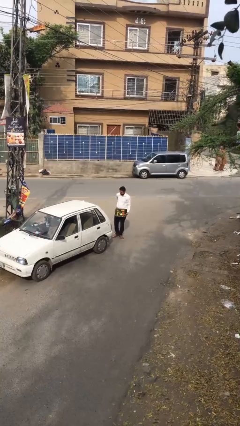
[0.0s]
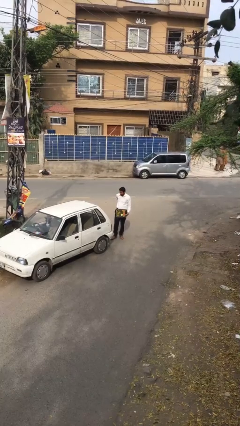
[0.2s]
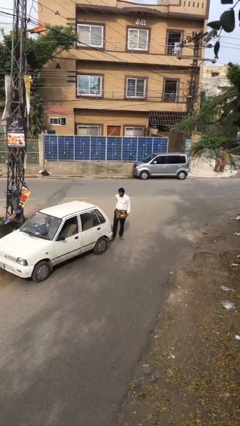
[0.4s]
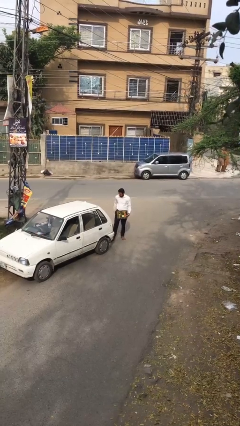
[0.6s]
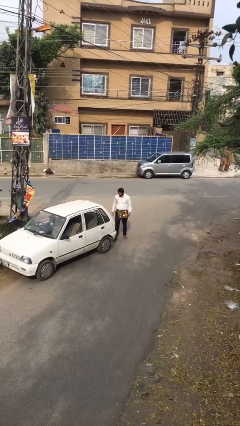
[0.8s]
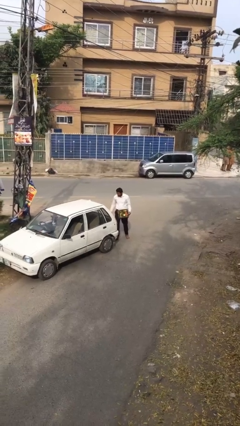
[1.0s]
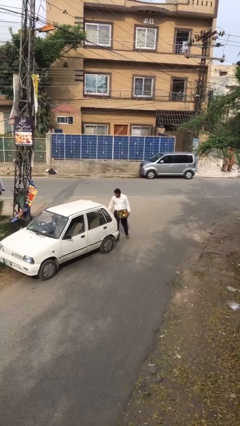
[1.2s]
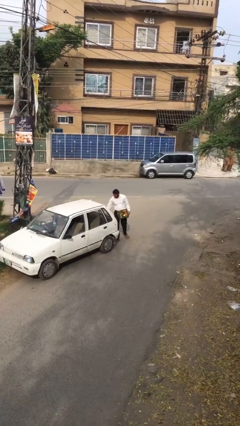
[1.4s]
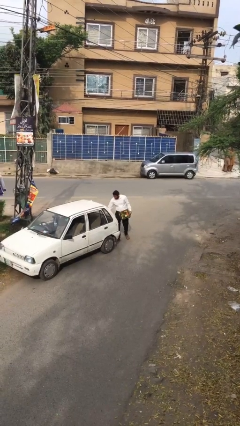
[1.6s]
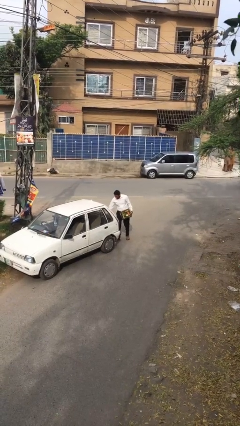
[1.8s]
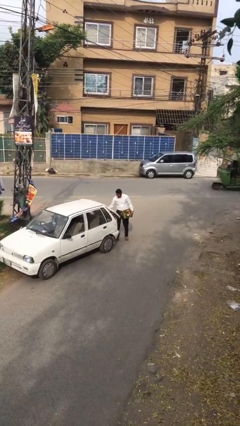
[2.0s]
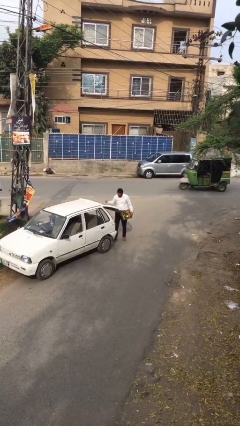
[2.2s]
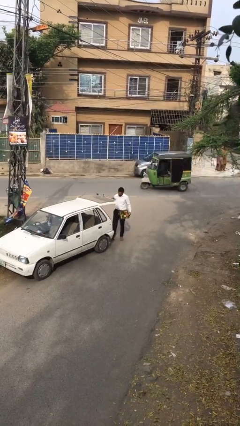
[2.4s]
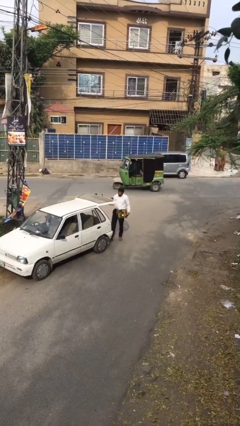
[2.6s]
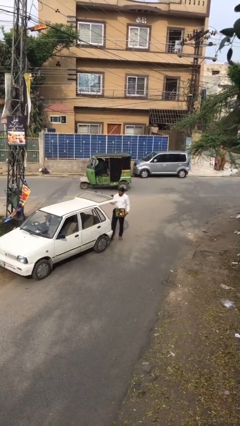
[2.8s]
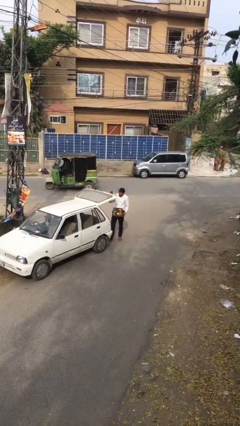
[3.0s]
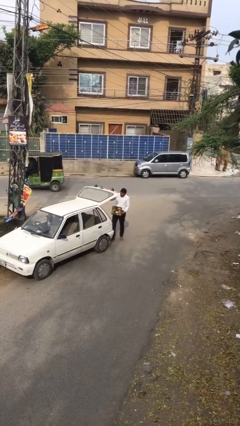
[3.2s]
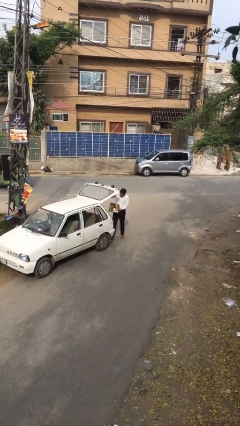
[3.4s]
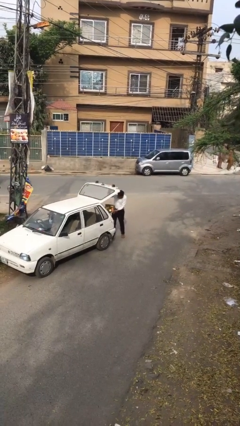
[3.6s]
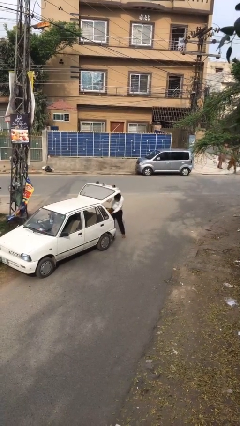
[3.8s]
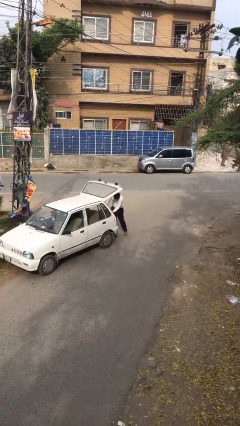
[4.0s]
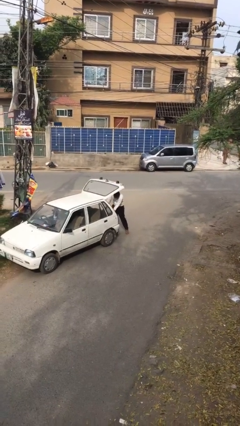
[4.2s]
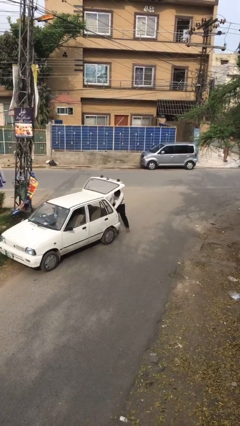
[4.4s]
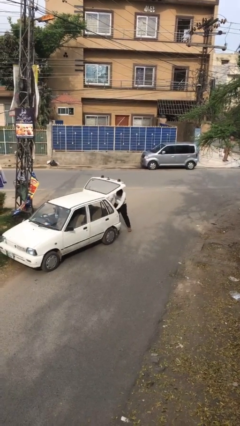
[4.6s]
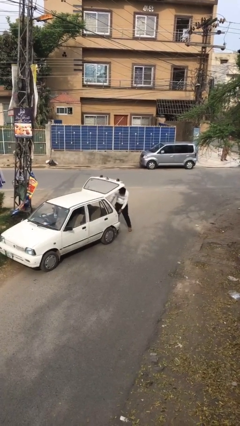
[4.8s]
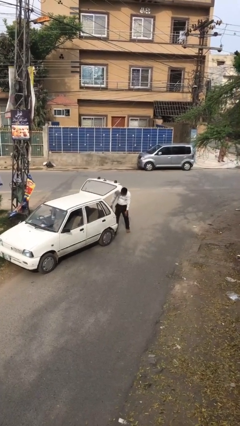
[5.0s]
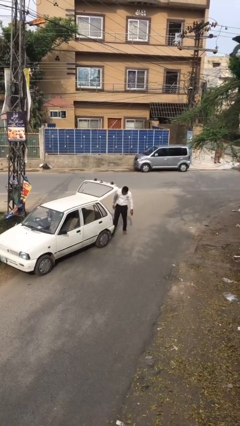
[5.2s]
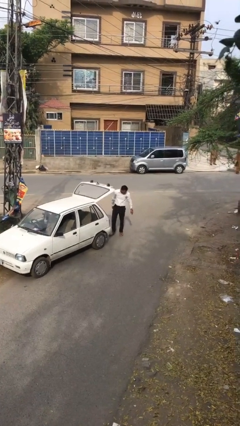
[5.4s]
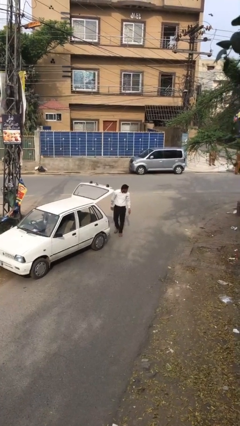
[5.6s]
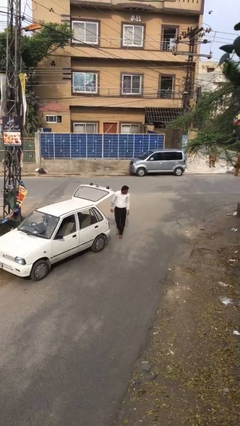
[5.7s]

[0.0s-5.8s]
person loads car

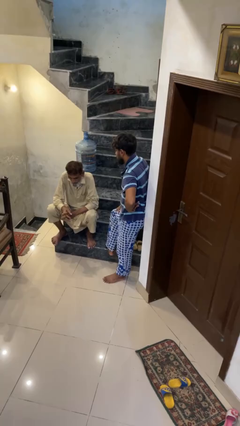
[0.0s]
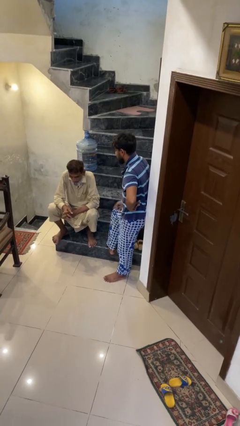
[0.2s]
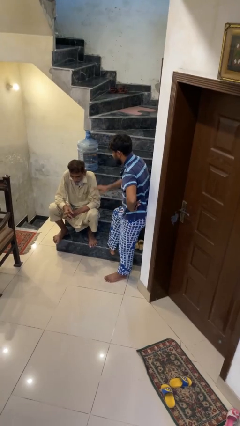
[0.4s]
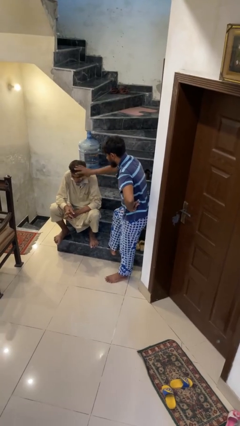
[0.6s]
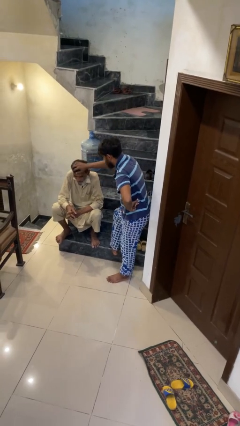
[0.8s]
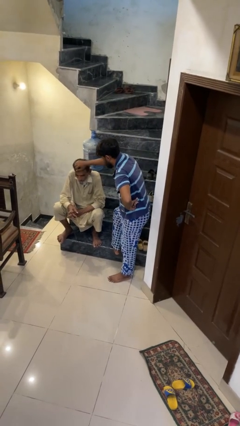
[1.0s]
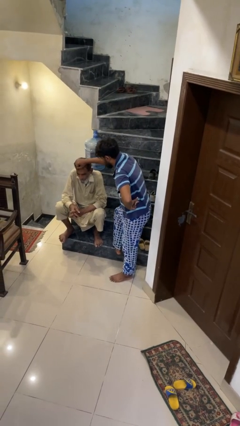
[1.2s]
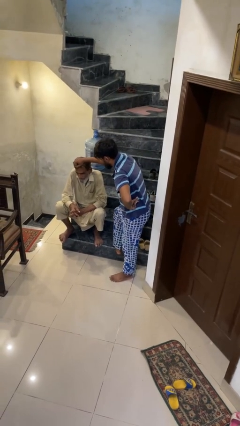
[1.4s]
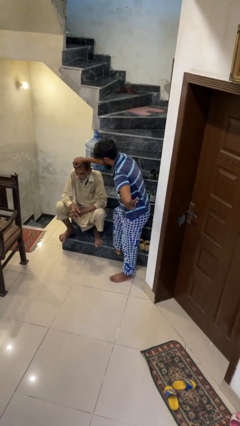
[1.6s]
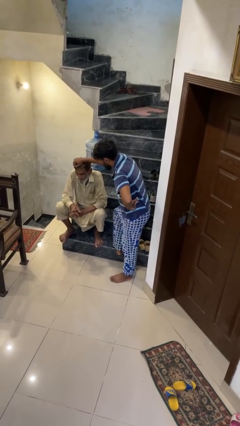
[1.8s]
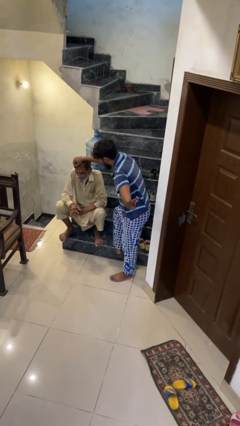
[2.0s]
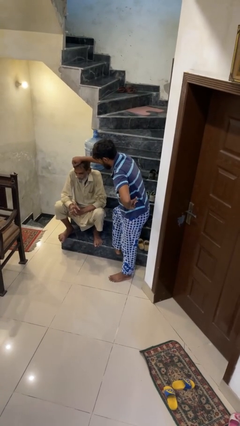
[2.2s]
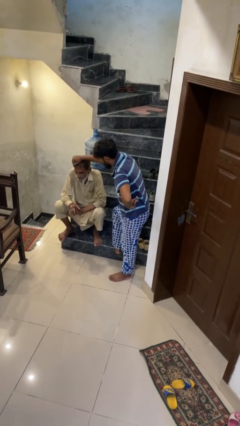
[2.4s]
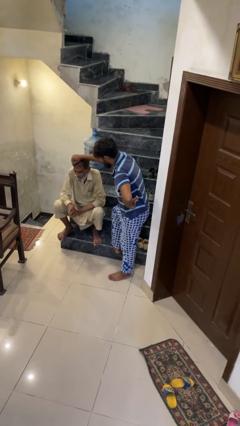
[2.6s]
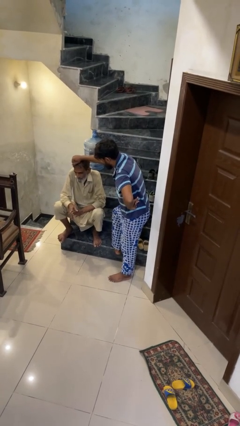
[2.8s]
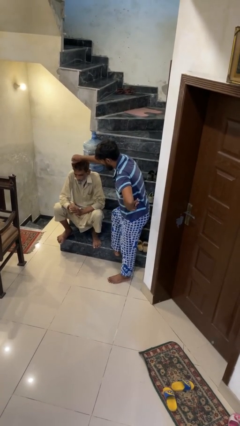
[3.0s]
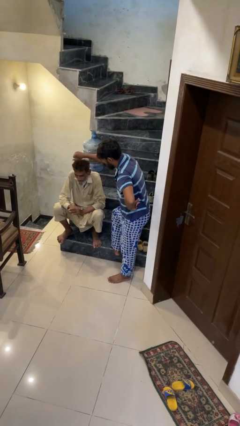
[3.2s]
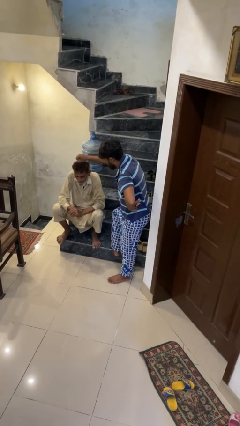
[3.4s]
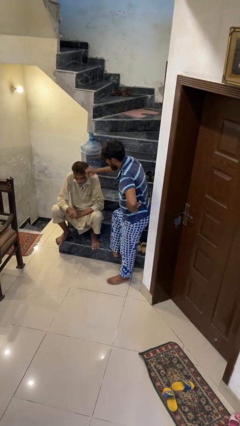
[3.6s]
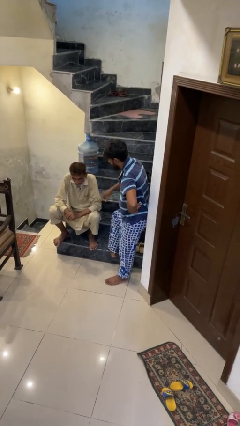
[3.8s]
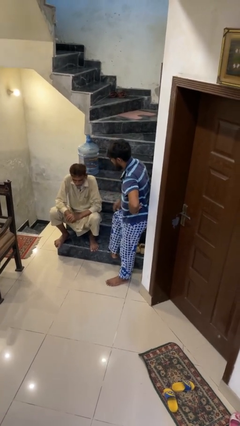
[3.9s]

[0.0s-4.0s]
person grabs person by hair

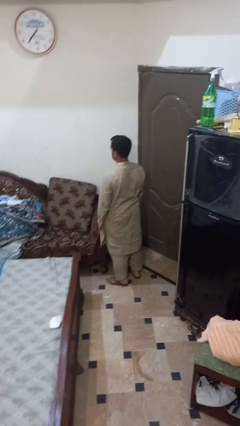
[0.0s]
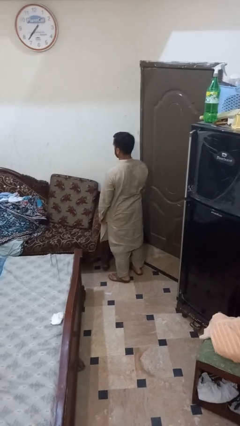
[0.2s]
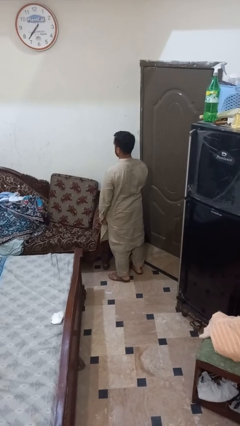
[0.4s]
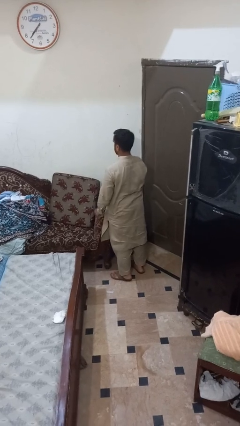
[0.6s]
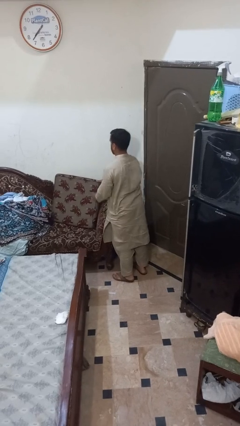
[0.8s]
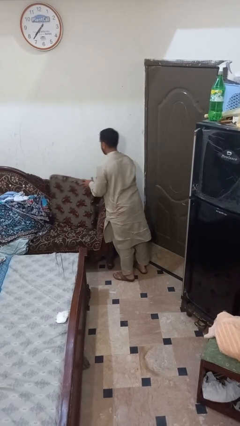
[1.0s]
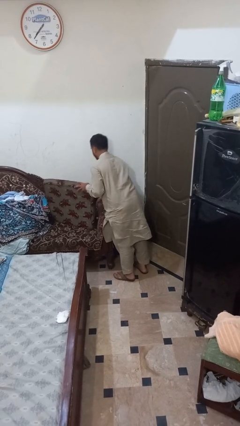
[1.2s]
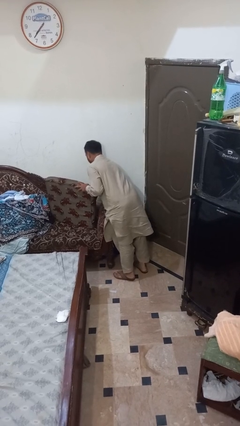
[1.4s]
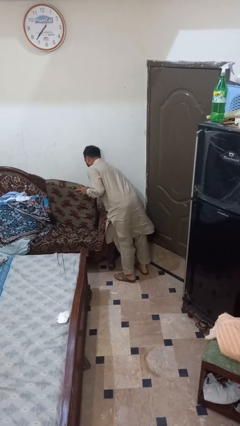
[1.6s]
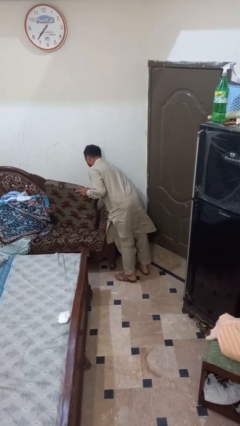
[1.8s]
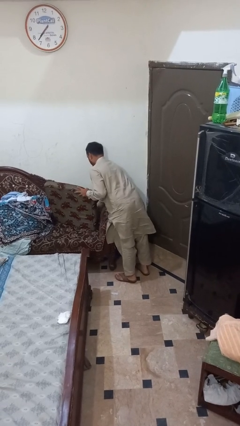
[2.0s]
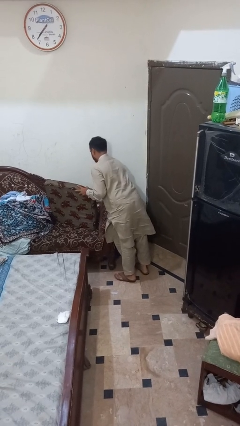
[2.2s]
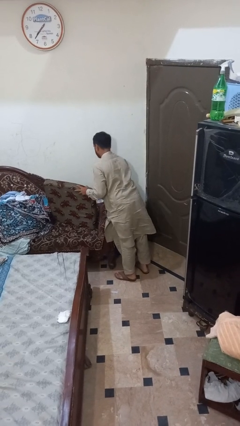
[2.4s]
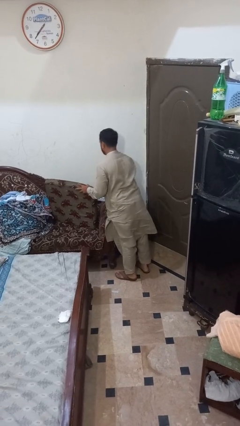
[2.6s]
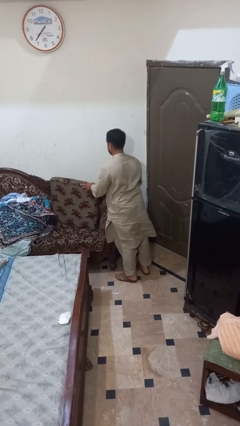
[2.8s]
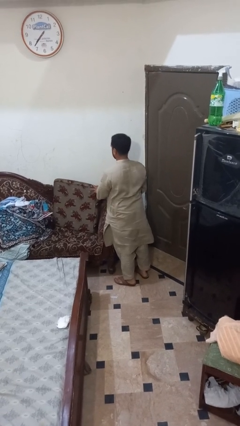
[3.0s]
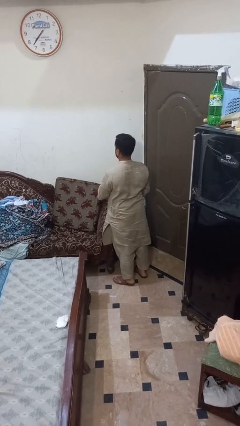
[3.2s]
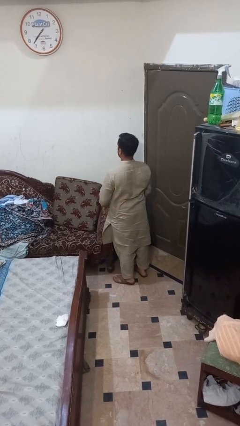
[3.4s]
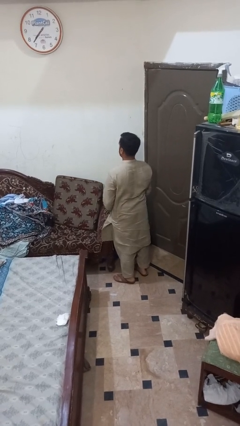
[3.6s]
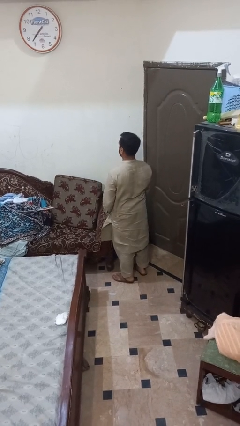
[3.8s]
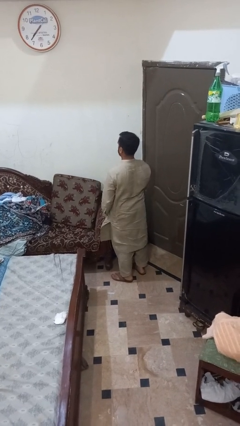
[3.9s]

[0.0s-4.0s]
person searches in couch

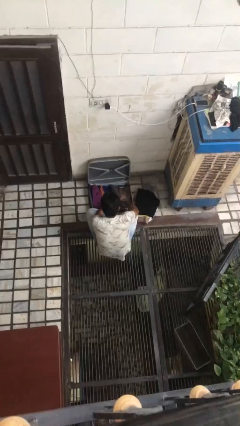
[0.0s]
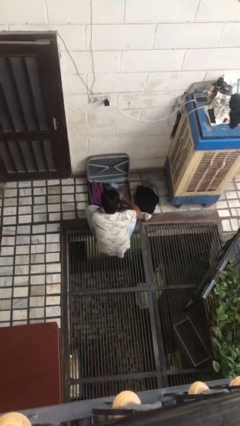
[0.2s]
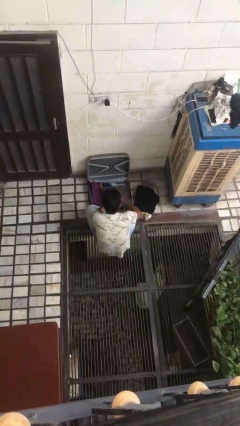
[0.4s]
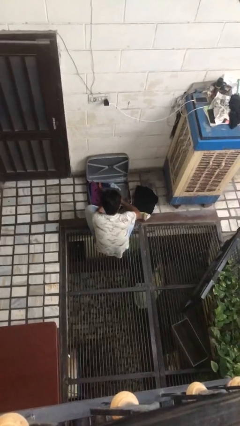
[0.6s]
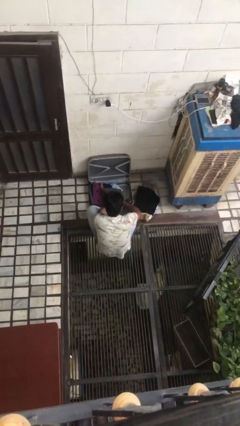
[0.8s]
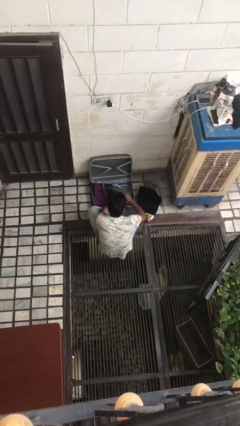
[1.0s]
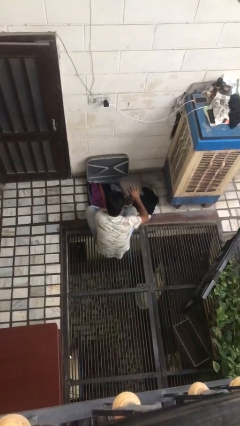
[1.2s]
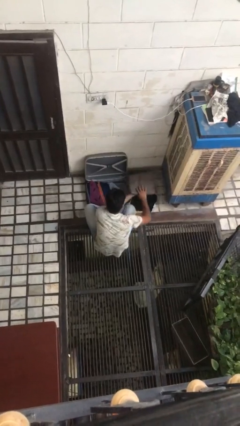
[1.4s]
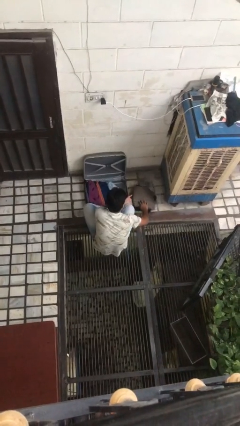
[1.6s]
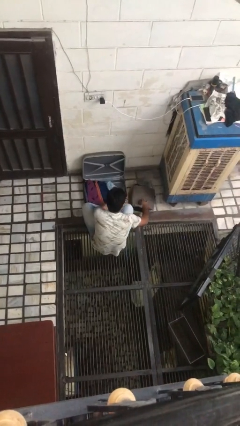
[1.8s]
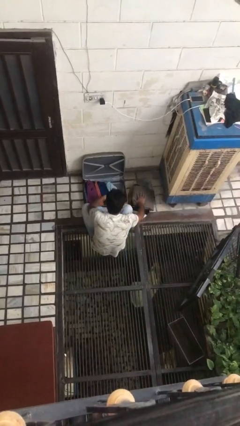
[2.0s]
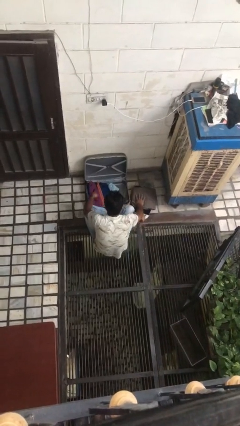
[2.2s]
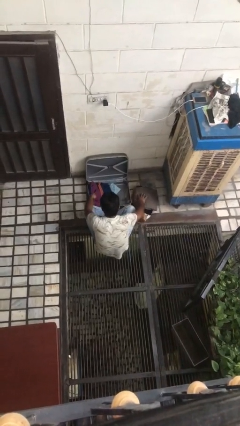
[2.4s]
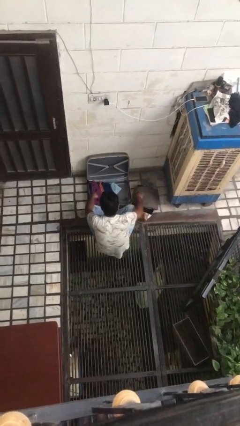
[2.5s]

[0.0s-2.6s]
person unloads clothes from suitcase

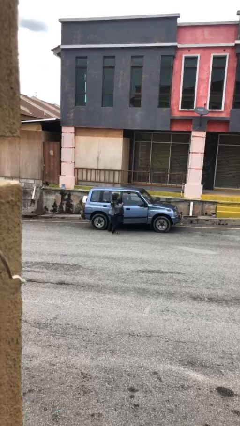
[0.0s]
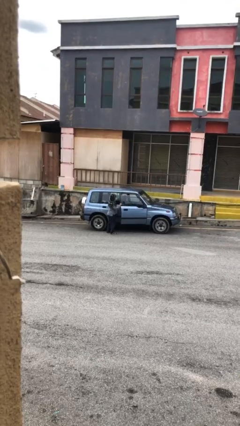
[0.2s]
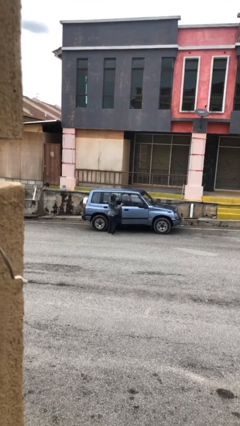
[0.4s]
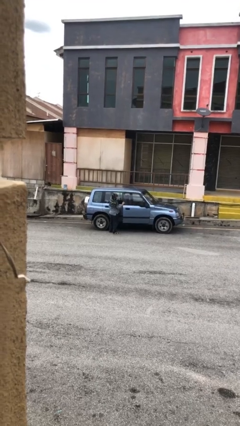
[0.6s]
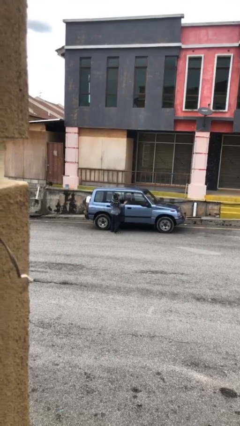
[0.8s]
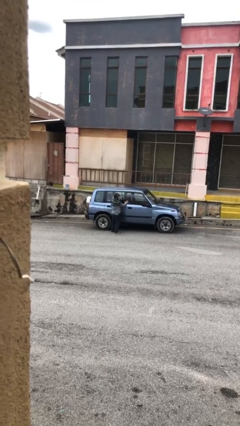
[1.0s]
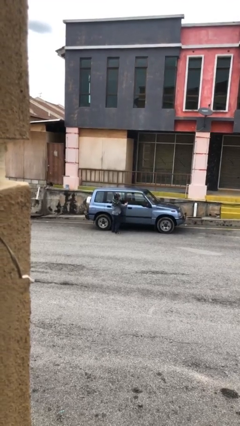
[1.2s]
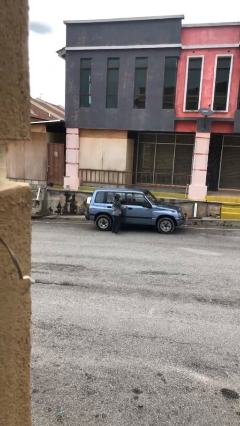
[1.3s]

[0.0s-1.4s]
person closes car door
